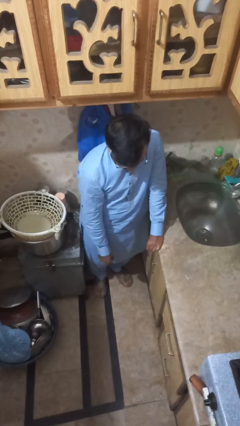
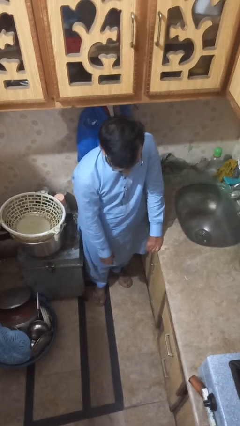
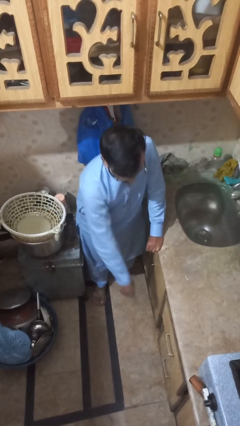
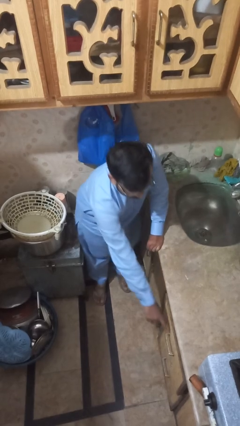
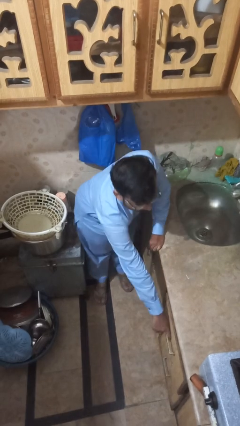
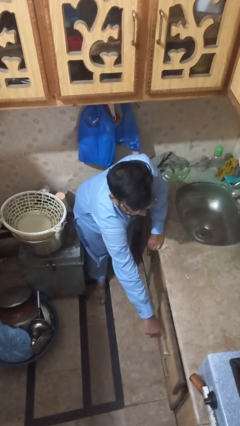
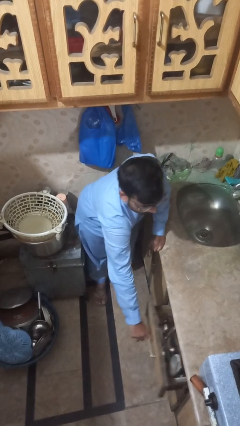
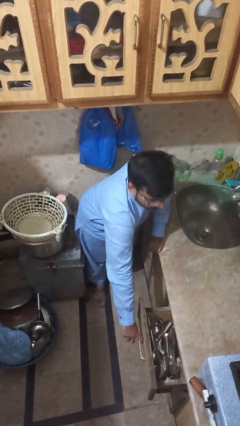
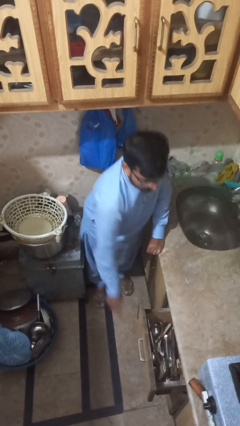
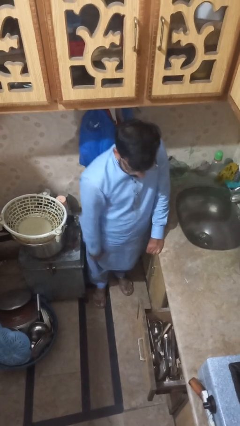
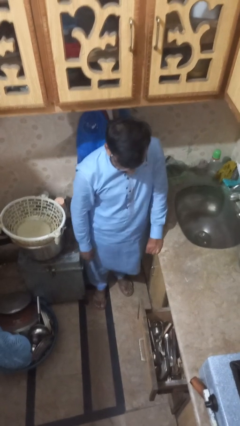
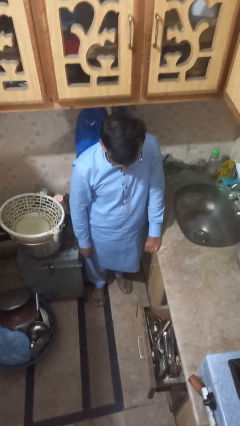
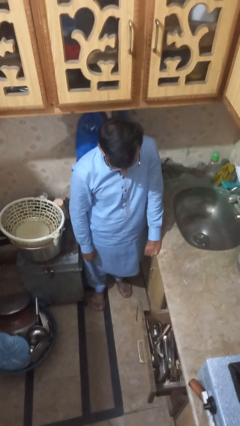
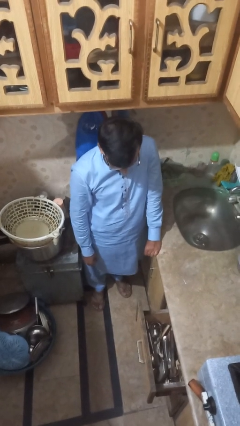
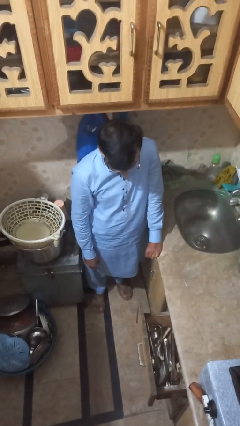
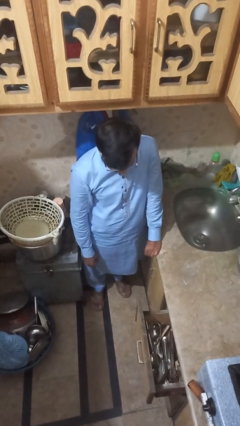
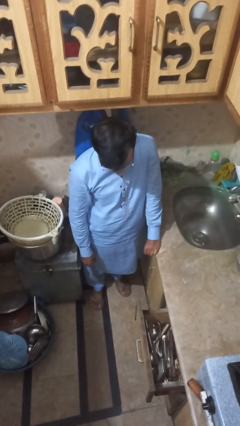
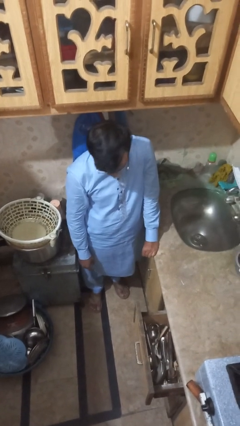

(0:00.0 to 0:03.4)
person opens kitchen drawer

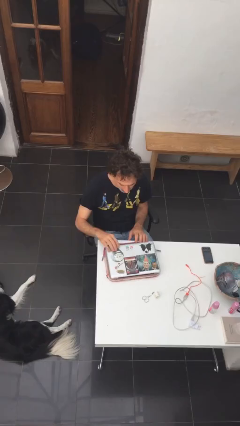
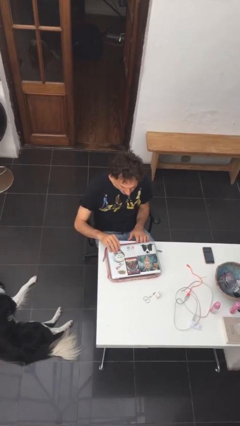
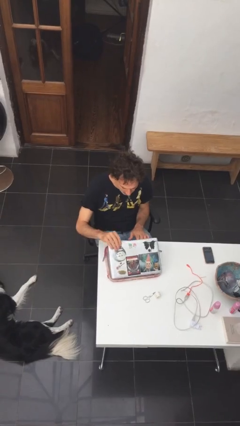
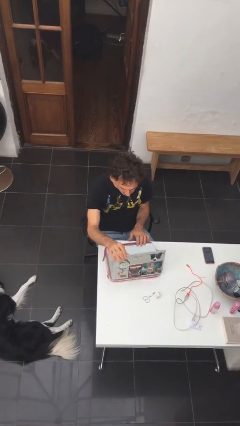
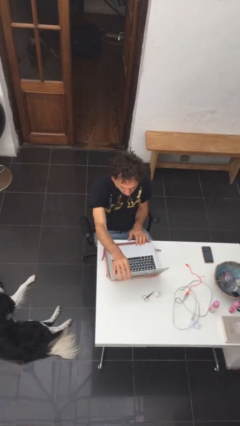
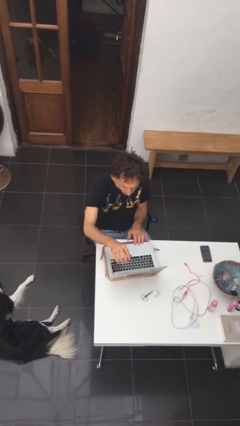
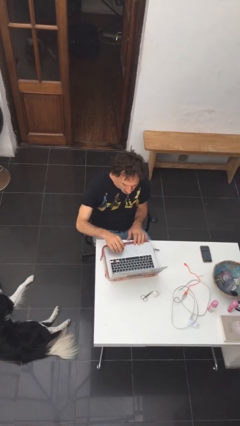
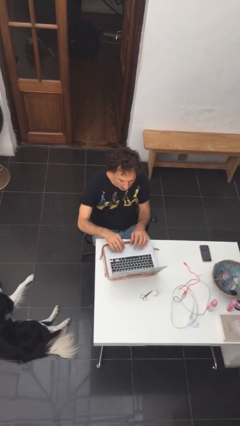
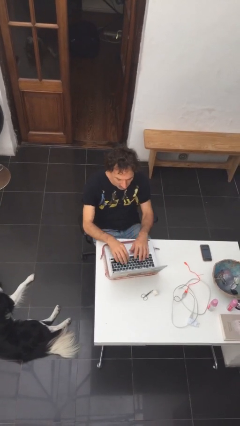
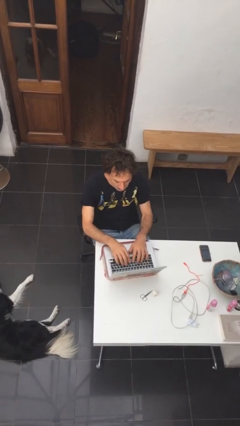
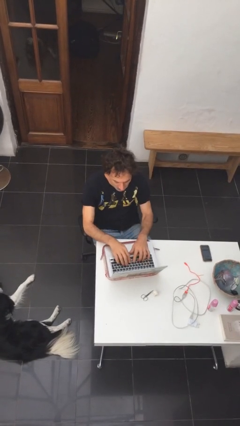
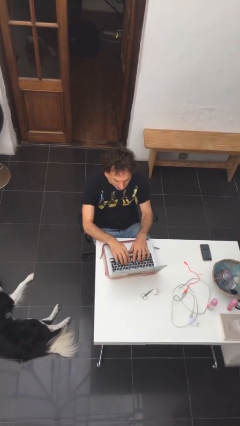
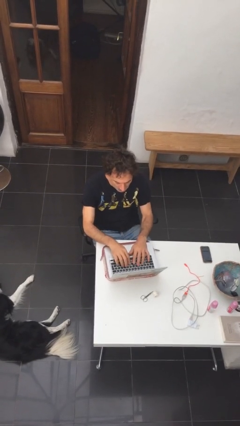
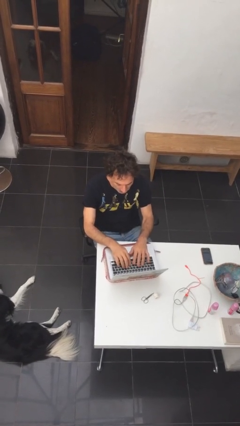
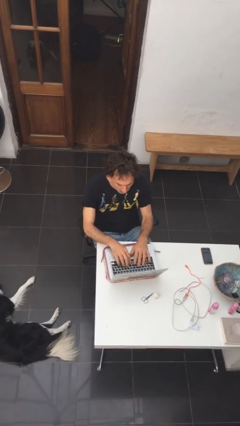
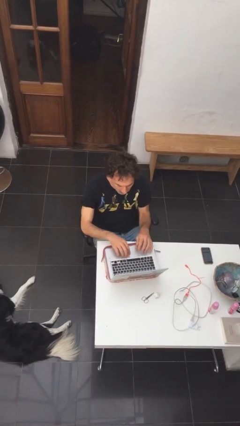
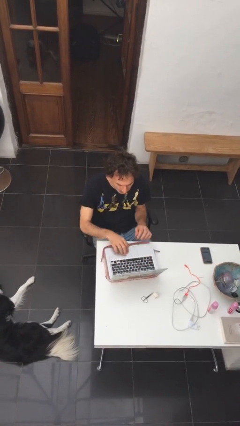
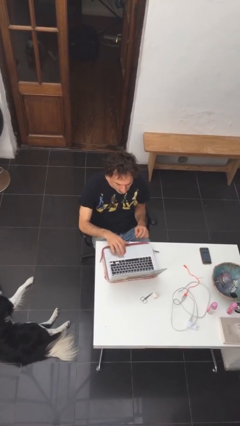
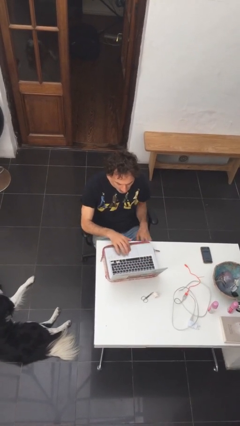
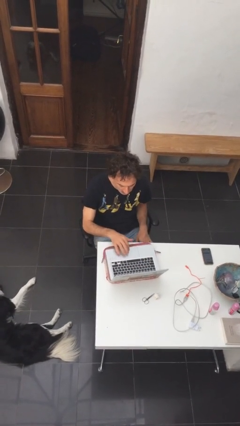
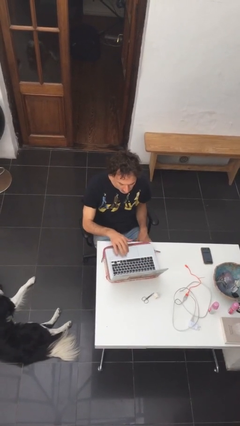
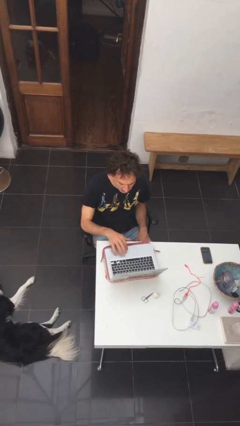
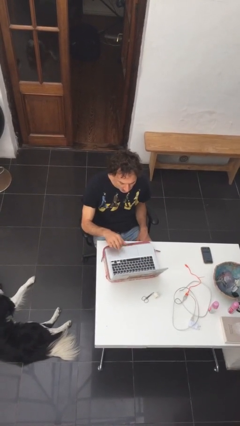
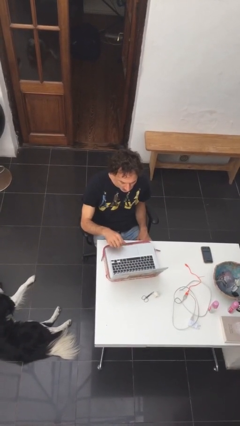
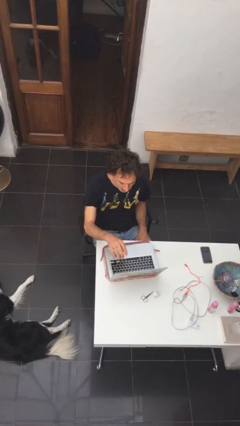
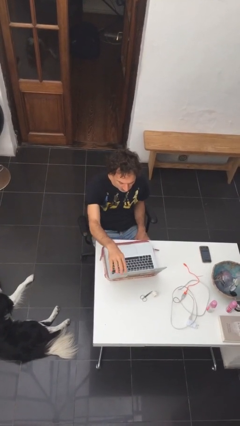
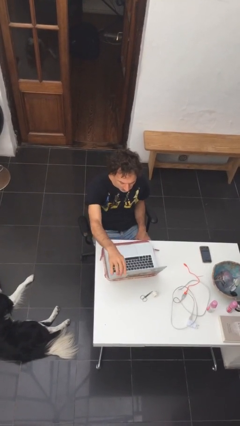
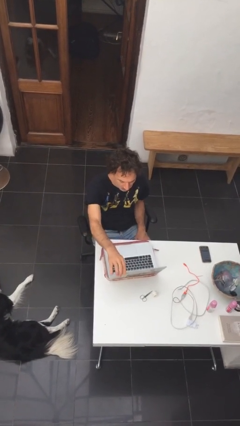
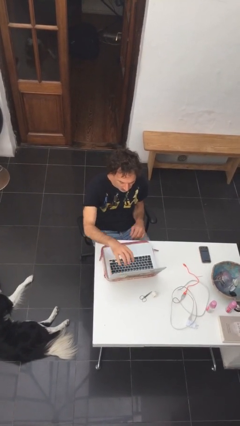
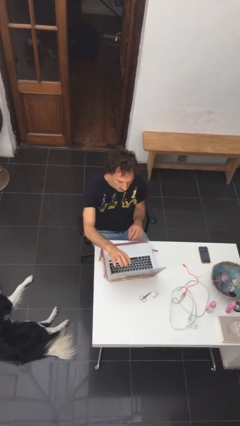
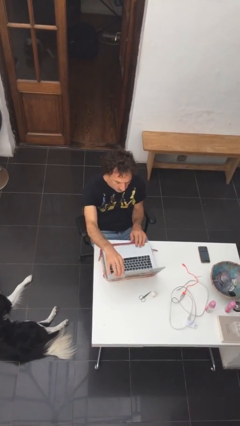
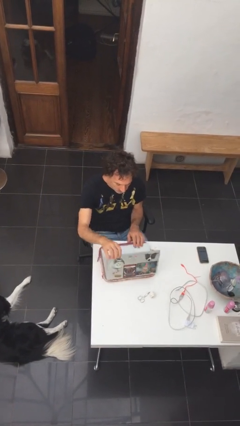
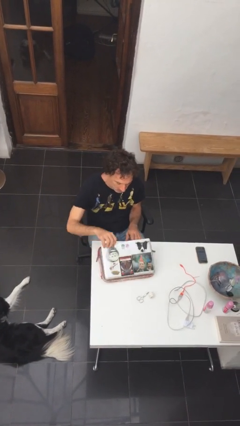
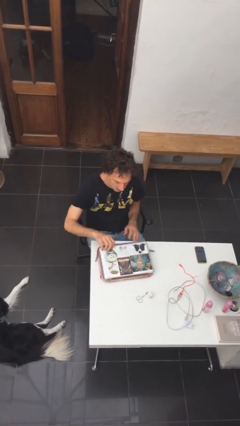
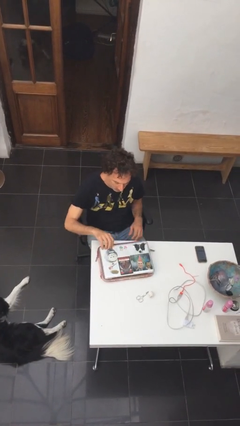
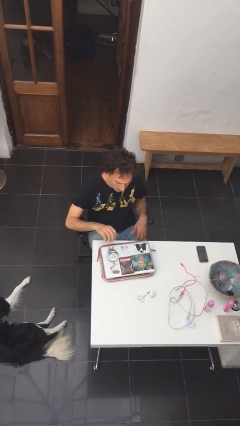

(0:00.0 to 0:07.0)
person interacts with laptop

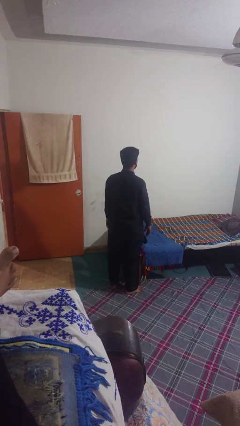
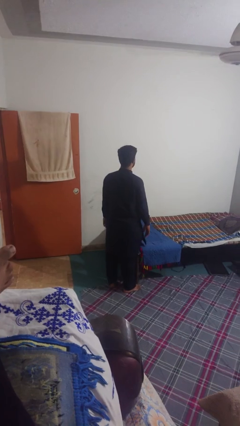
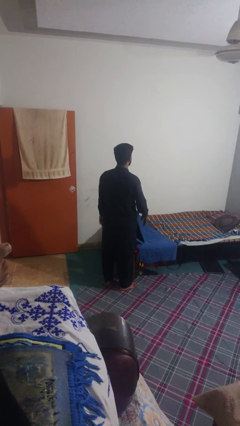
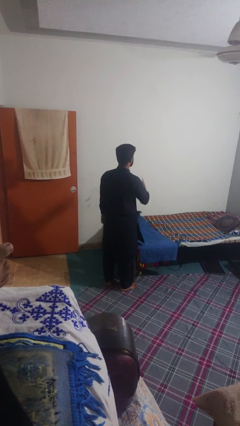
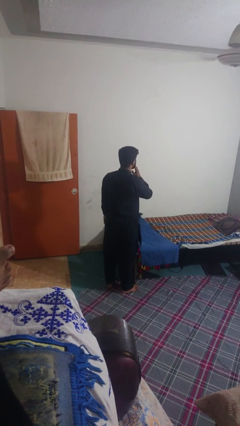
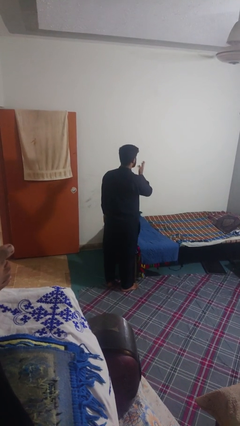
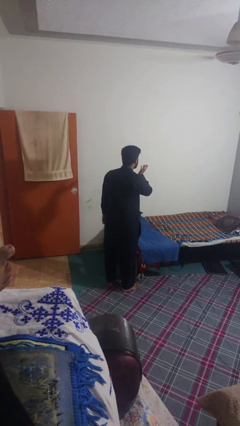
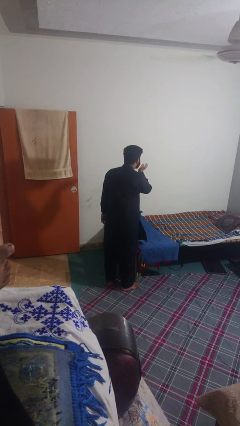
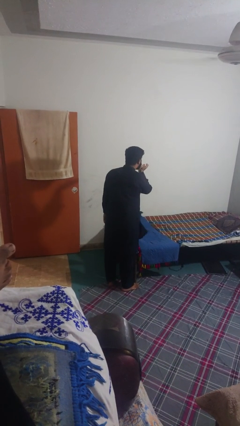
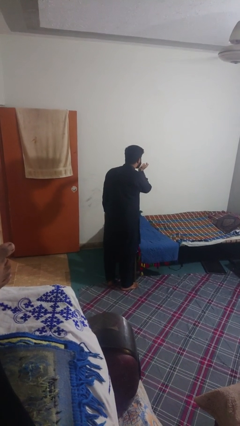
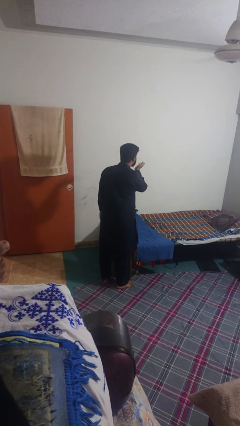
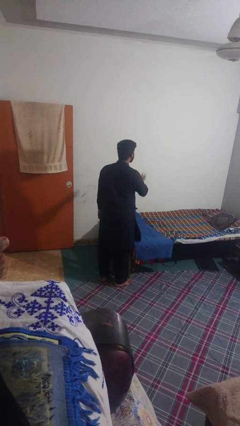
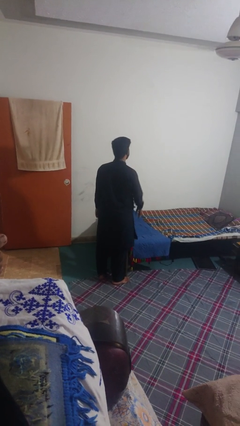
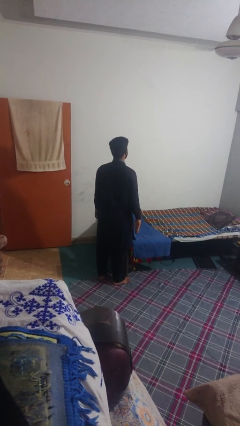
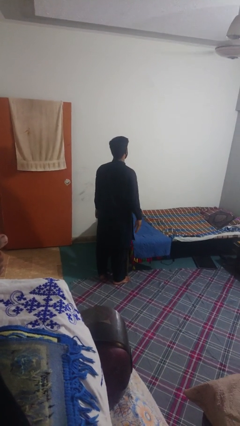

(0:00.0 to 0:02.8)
person gestures blow kiss

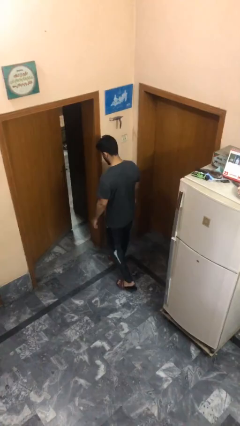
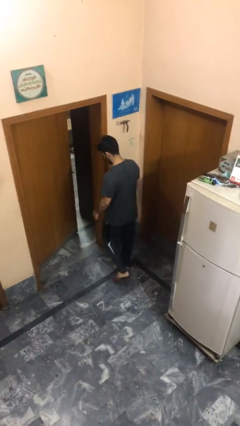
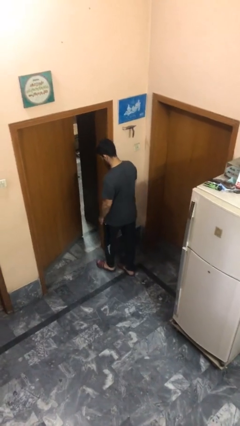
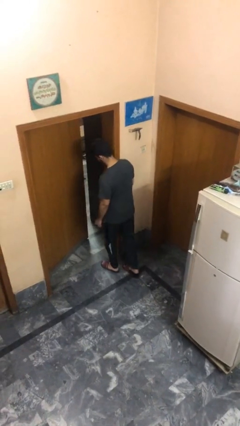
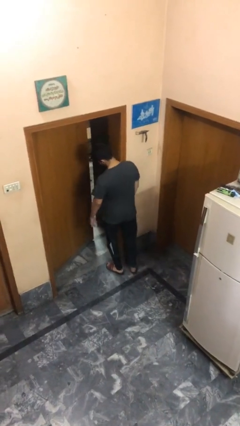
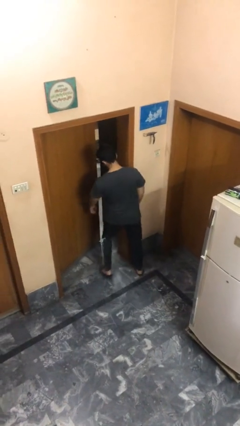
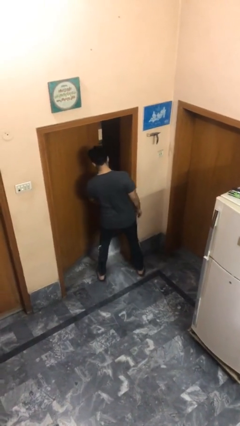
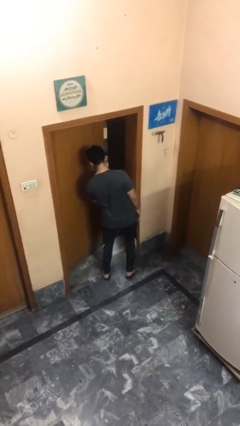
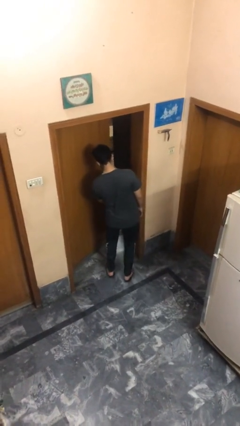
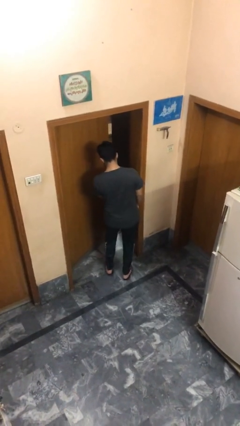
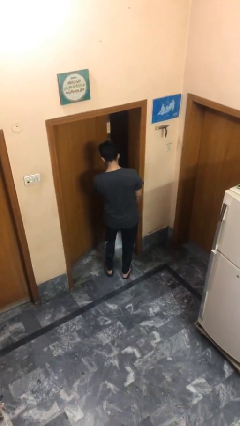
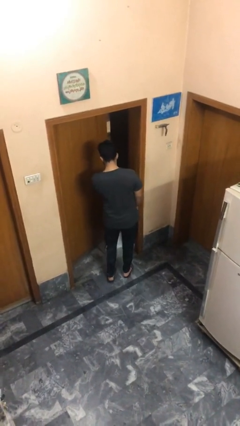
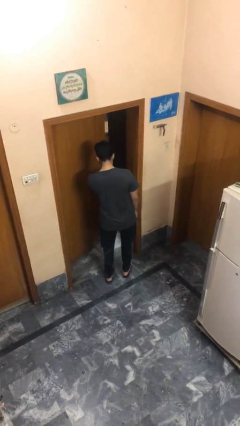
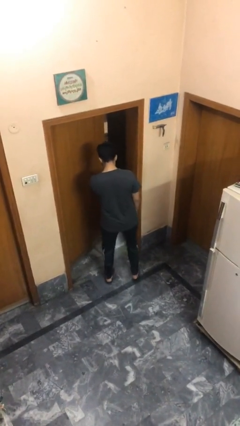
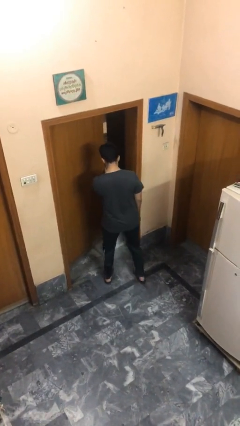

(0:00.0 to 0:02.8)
person bumps into wall

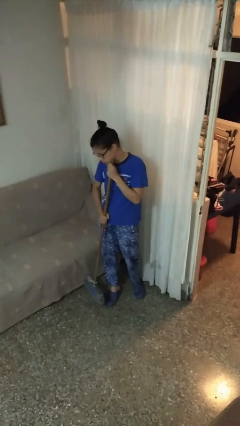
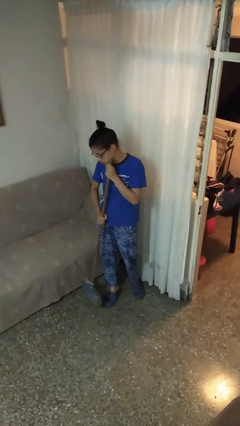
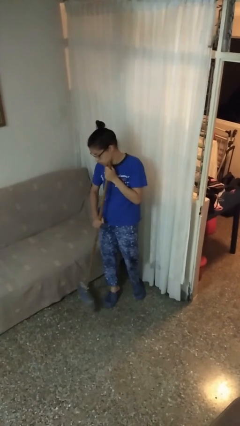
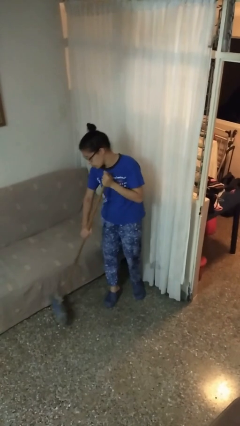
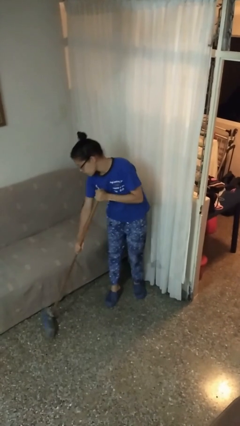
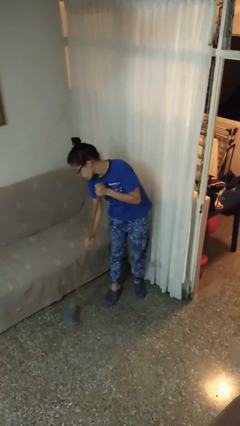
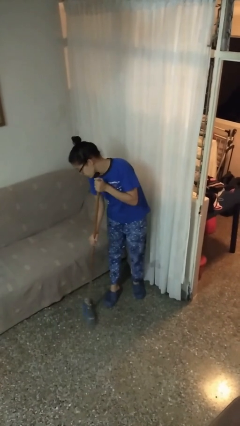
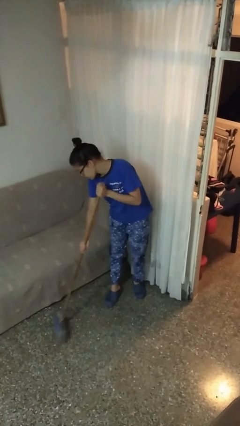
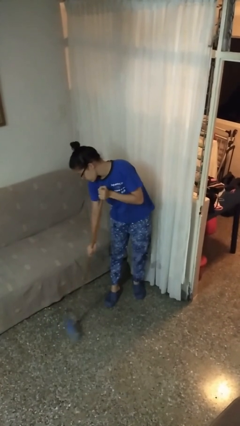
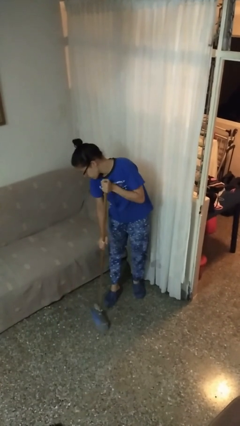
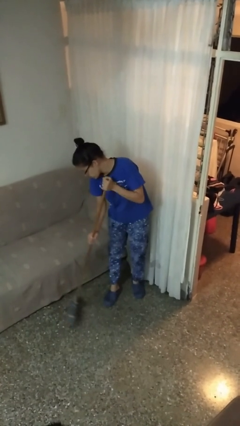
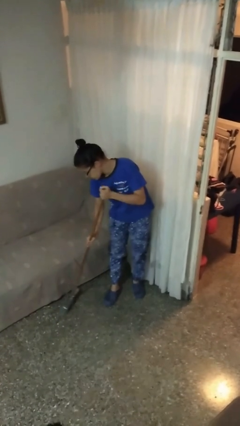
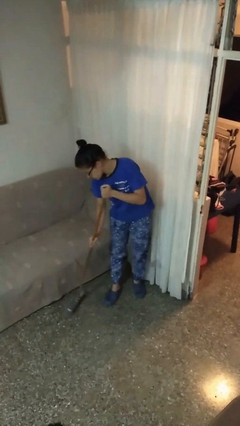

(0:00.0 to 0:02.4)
person sweeps floor
